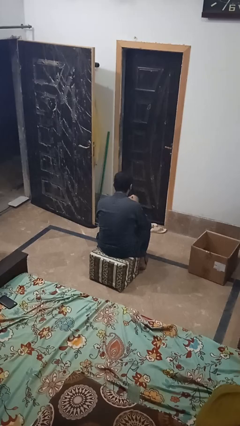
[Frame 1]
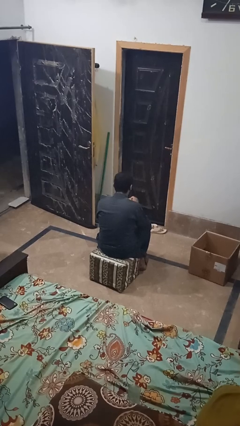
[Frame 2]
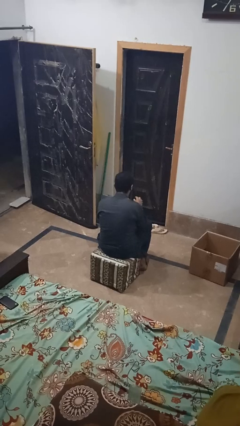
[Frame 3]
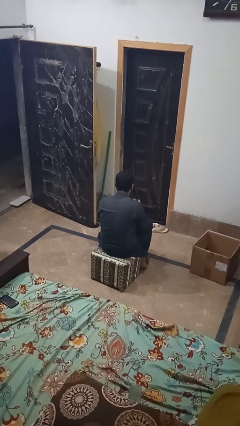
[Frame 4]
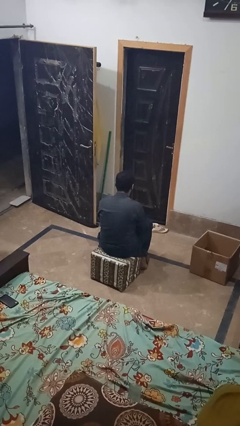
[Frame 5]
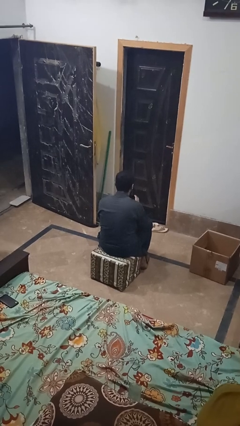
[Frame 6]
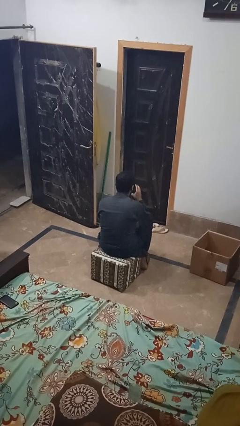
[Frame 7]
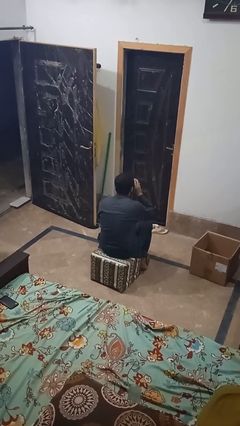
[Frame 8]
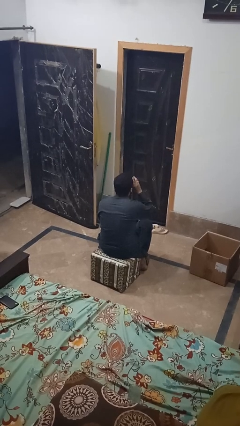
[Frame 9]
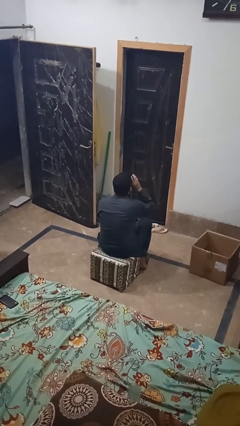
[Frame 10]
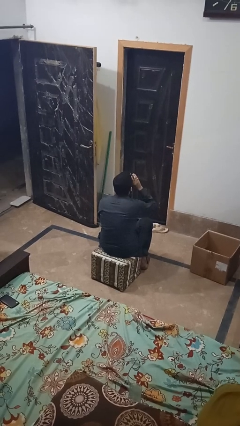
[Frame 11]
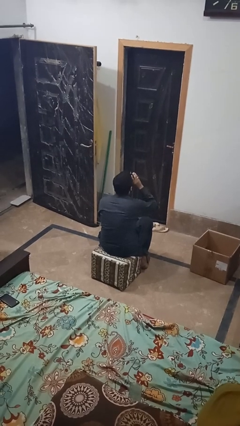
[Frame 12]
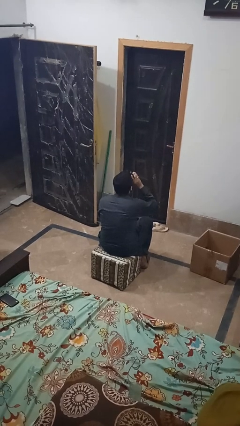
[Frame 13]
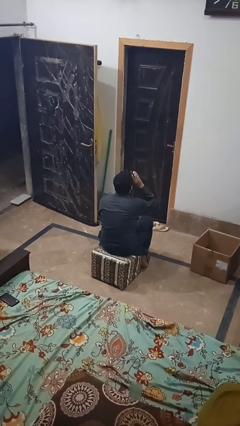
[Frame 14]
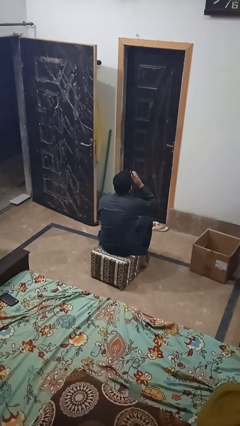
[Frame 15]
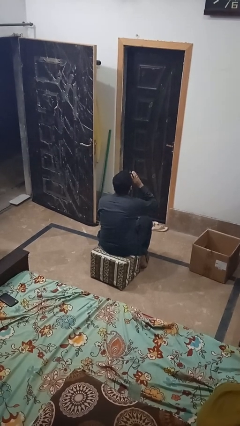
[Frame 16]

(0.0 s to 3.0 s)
person drinks from mug

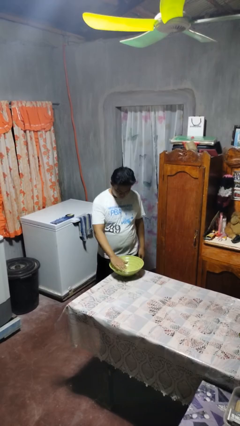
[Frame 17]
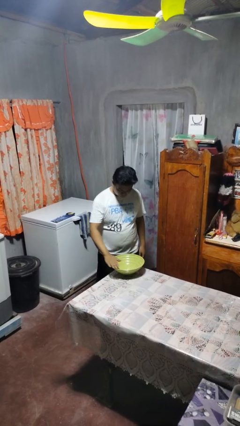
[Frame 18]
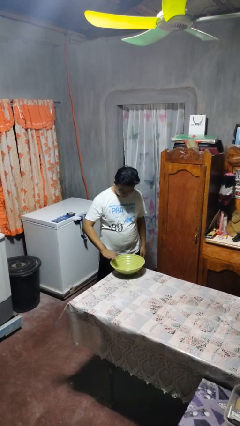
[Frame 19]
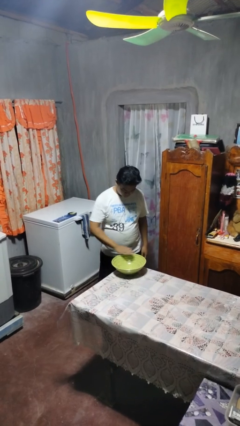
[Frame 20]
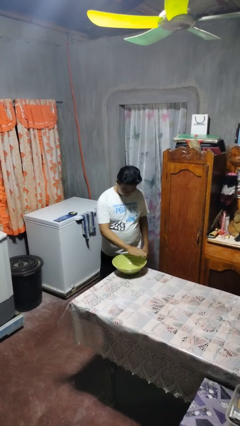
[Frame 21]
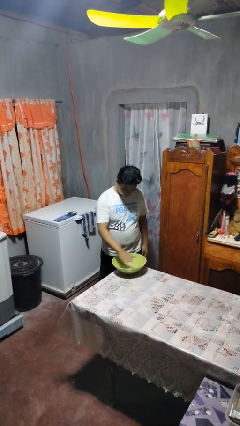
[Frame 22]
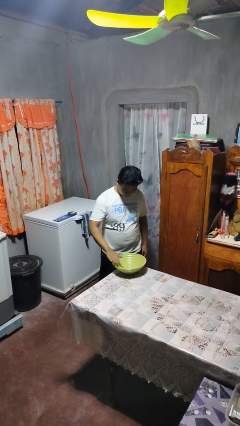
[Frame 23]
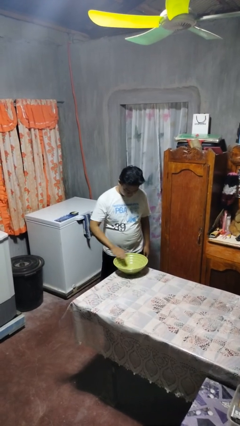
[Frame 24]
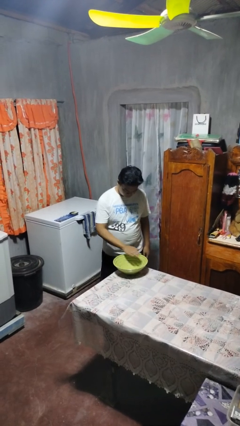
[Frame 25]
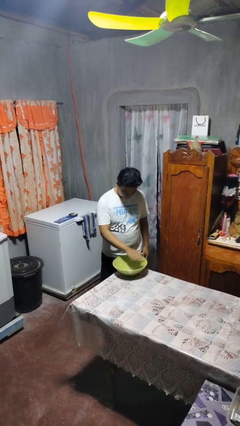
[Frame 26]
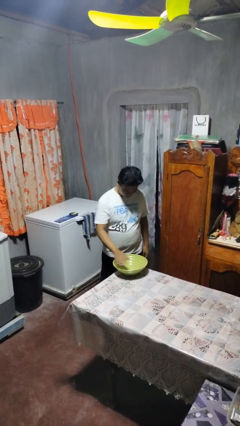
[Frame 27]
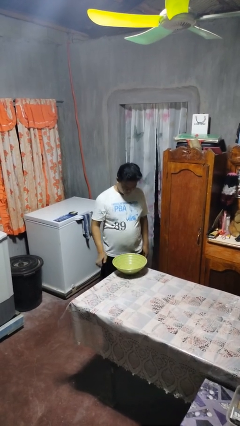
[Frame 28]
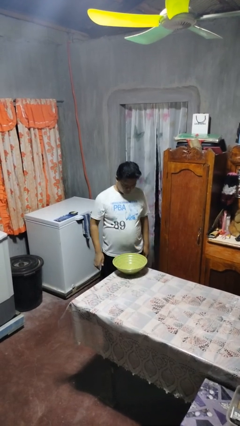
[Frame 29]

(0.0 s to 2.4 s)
person waves hand over object

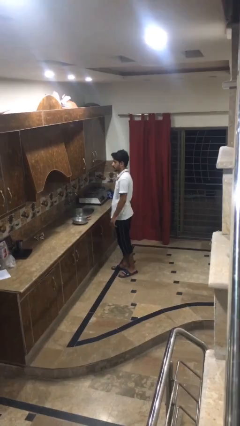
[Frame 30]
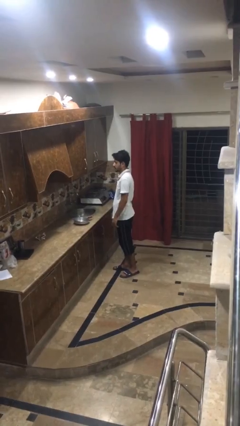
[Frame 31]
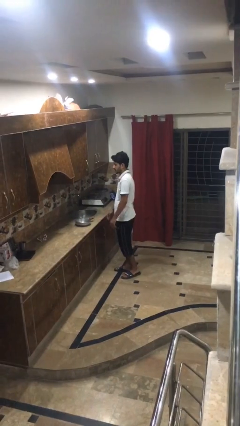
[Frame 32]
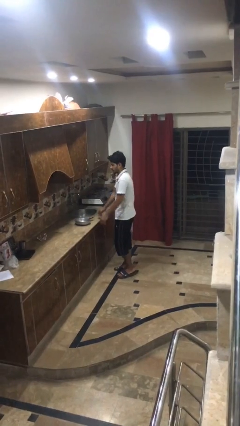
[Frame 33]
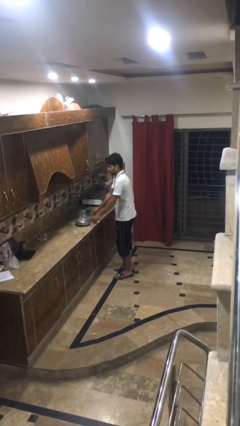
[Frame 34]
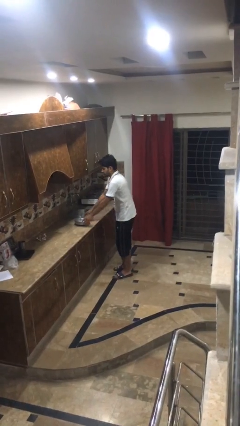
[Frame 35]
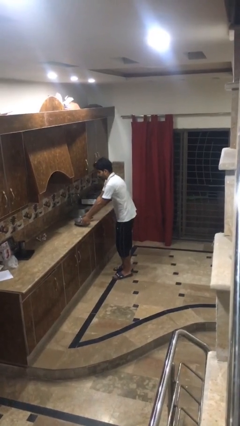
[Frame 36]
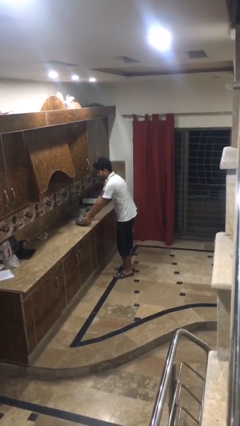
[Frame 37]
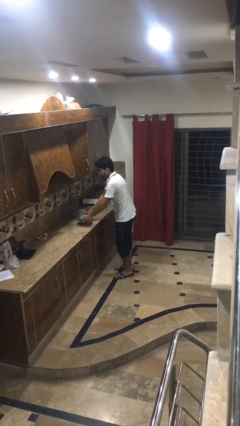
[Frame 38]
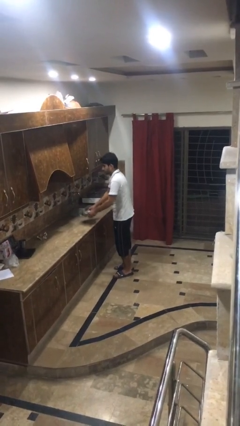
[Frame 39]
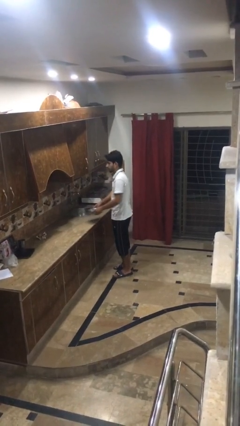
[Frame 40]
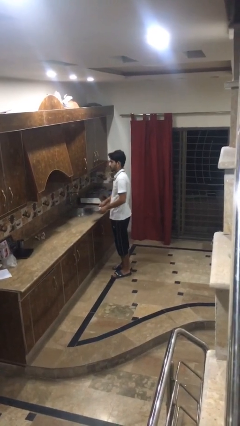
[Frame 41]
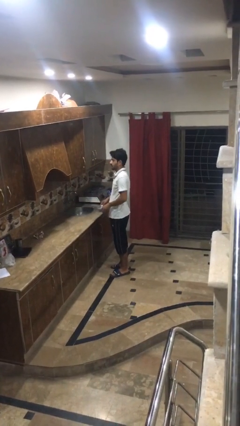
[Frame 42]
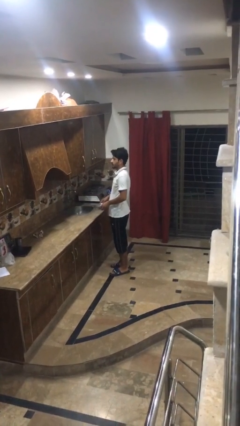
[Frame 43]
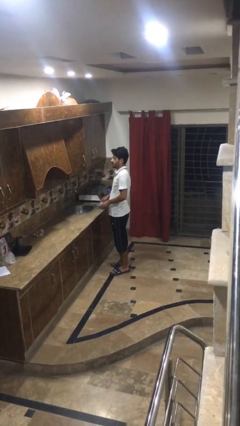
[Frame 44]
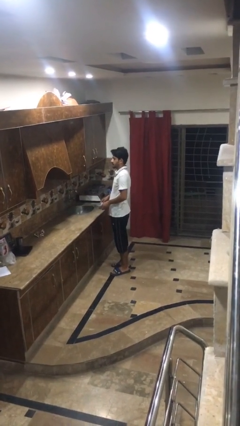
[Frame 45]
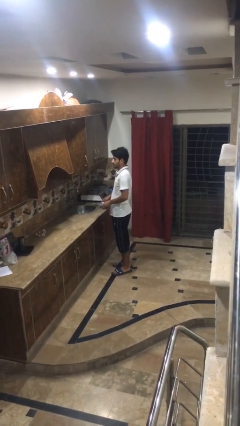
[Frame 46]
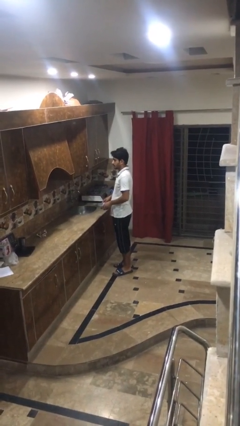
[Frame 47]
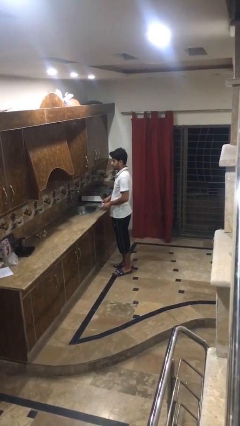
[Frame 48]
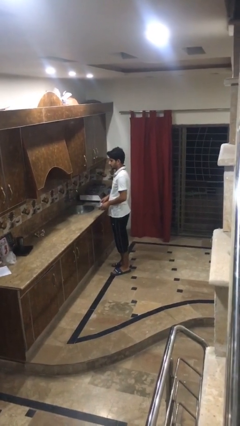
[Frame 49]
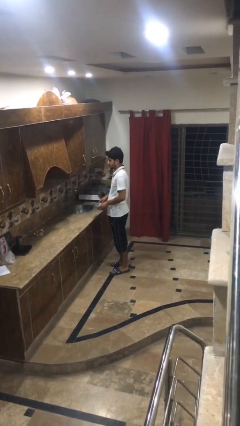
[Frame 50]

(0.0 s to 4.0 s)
person picks up object from countertop

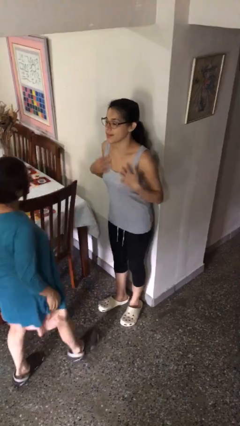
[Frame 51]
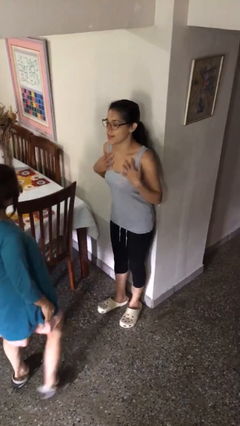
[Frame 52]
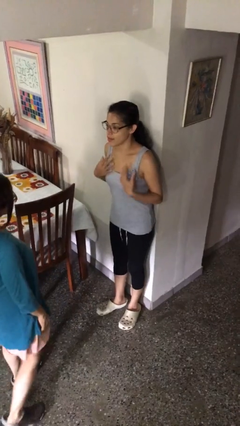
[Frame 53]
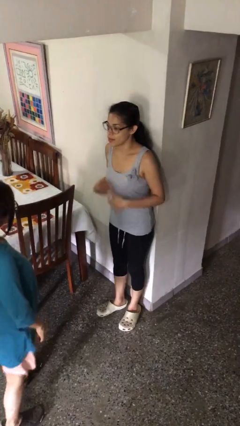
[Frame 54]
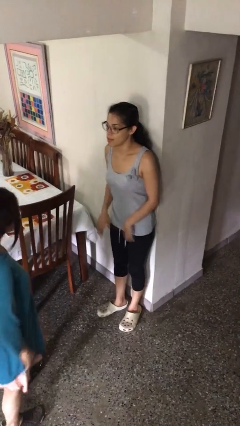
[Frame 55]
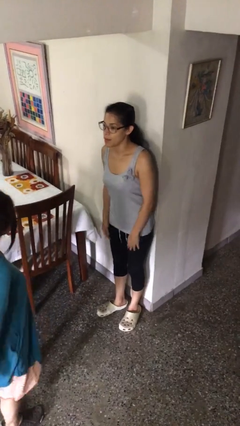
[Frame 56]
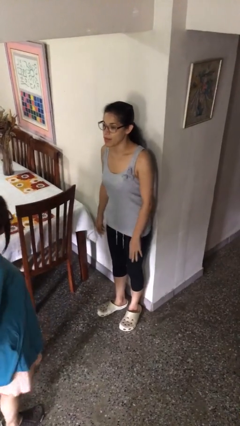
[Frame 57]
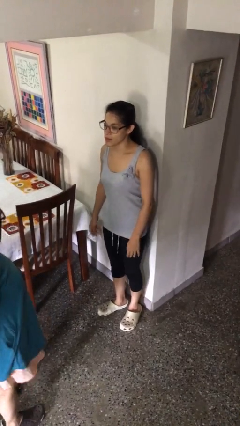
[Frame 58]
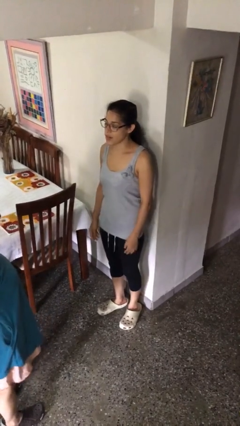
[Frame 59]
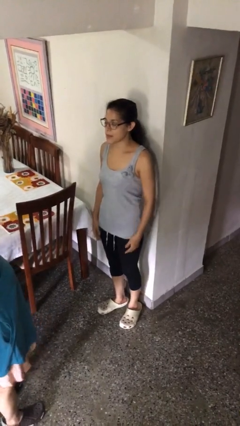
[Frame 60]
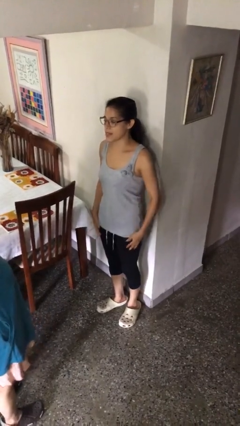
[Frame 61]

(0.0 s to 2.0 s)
person talks to person

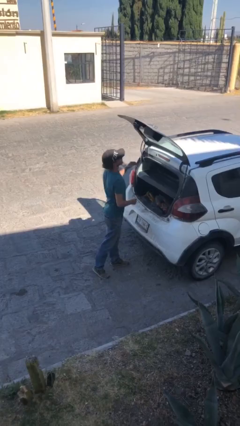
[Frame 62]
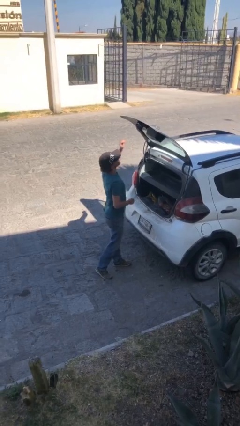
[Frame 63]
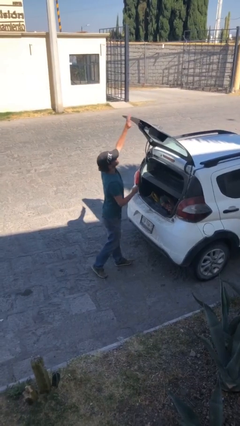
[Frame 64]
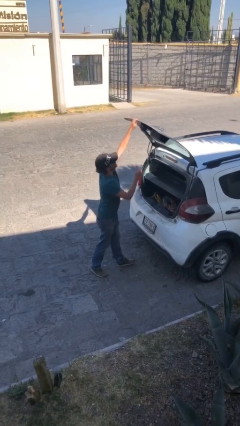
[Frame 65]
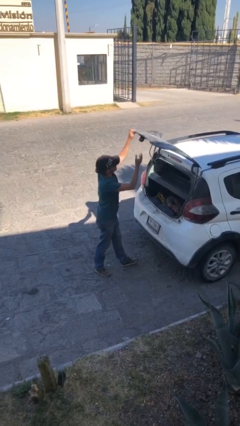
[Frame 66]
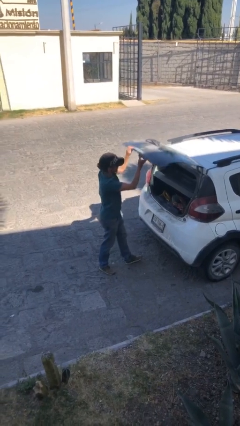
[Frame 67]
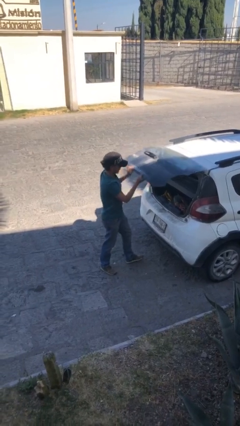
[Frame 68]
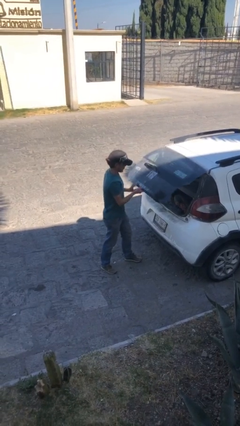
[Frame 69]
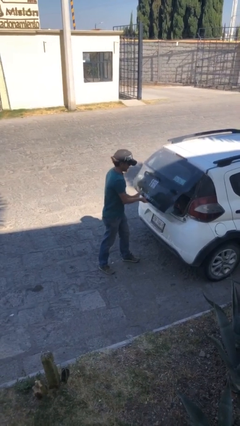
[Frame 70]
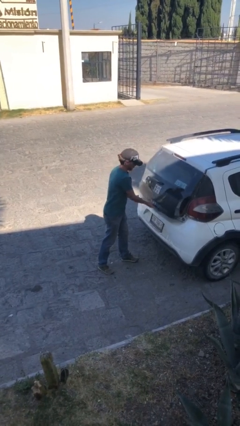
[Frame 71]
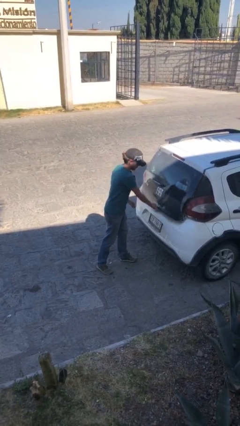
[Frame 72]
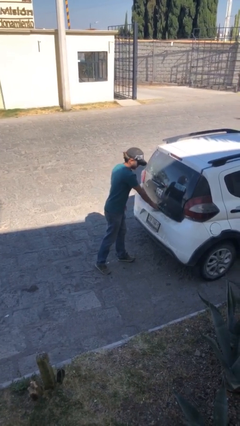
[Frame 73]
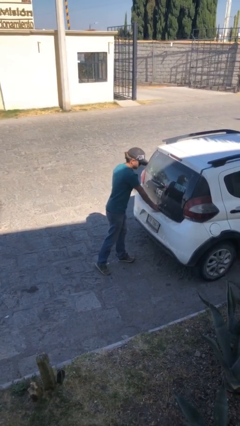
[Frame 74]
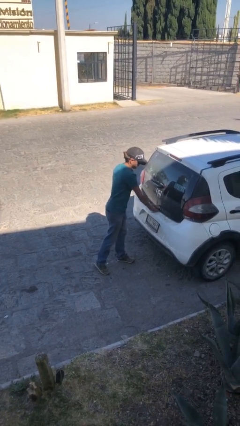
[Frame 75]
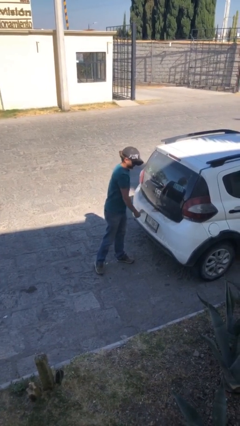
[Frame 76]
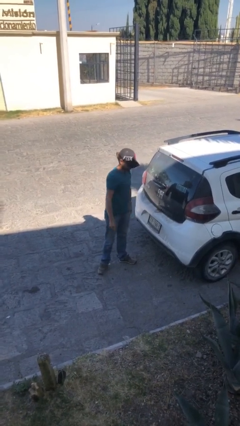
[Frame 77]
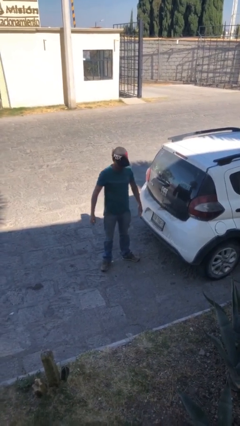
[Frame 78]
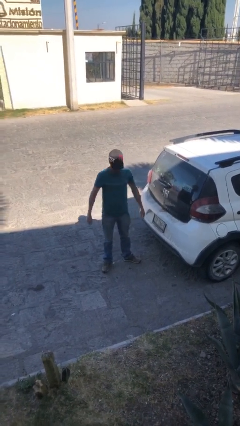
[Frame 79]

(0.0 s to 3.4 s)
person closes car trunk

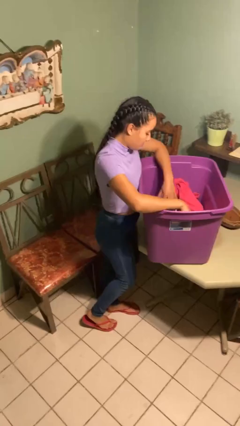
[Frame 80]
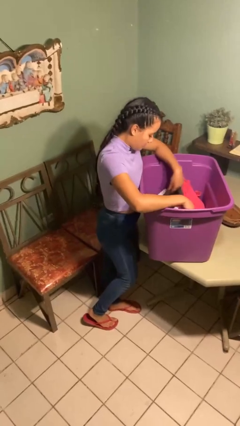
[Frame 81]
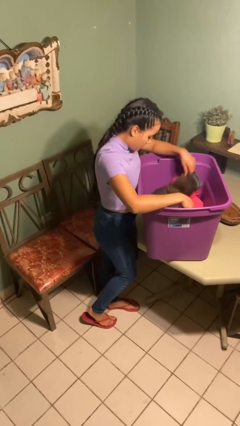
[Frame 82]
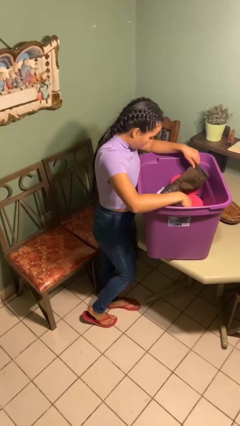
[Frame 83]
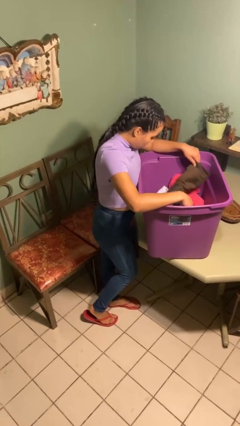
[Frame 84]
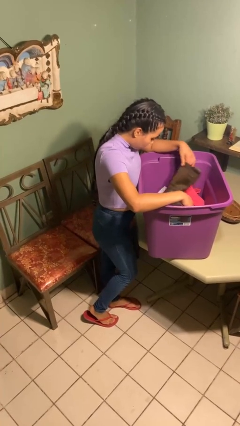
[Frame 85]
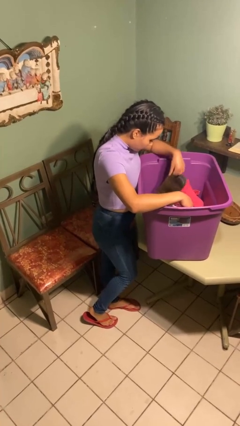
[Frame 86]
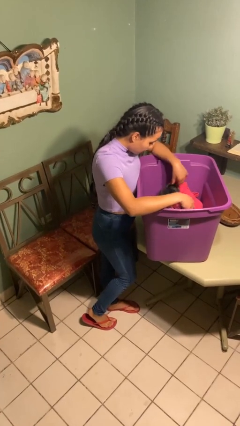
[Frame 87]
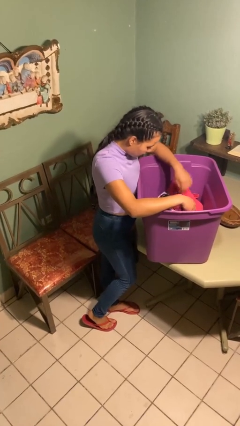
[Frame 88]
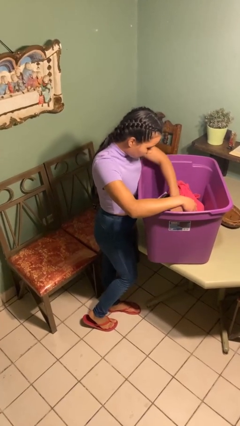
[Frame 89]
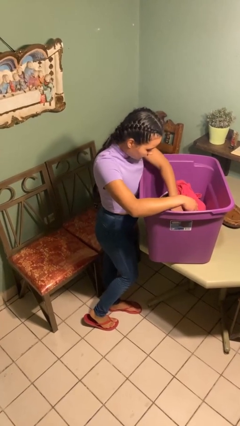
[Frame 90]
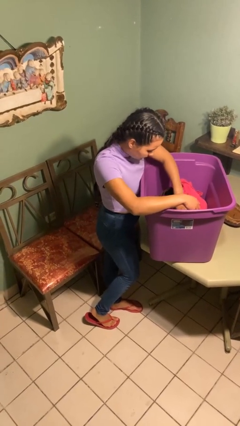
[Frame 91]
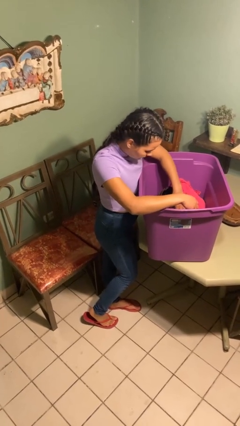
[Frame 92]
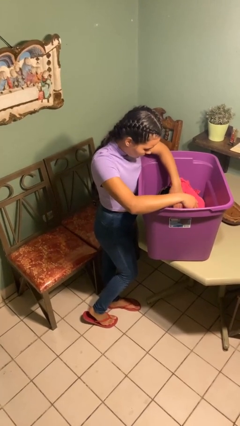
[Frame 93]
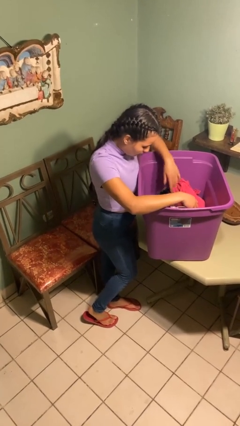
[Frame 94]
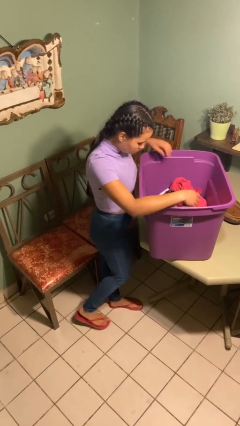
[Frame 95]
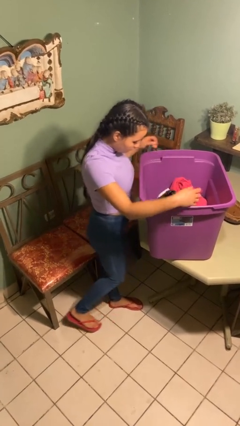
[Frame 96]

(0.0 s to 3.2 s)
person searches in box
